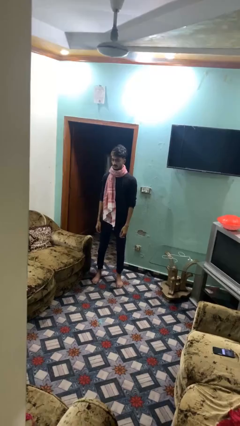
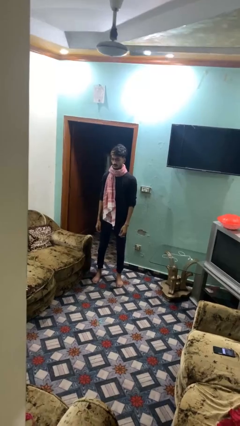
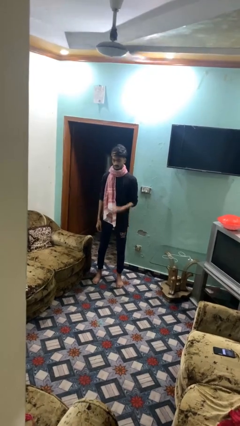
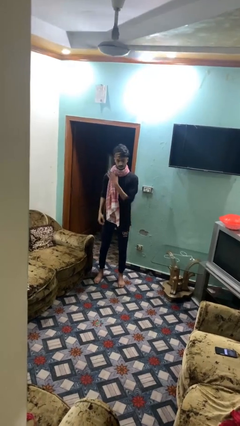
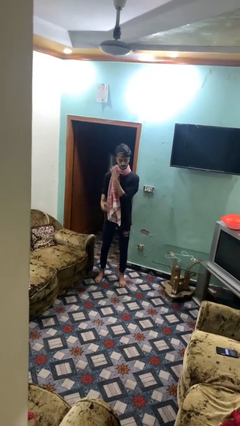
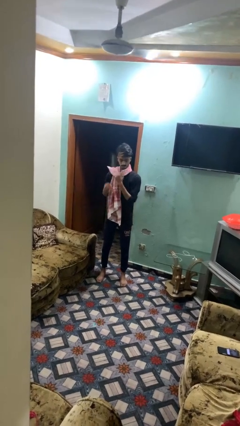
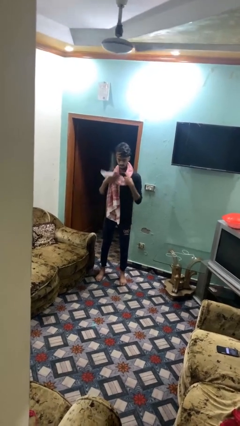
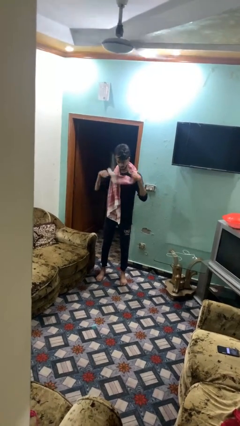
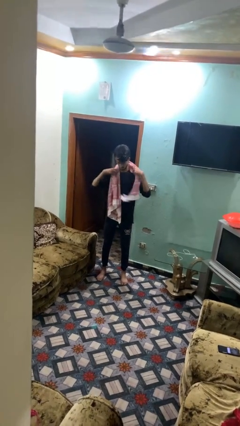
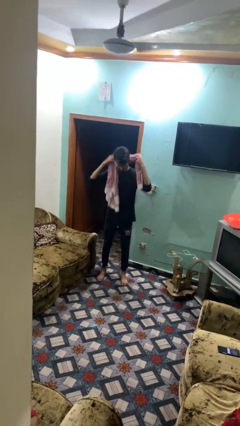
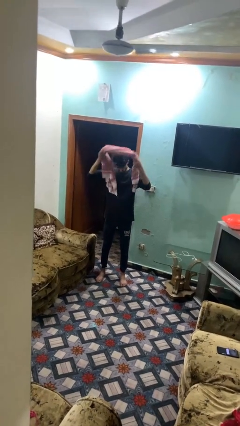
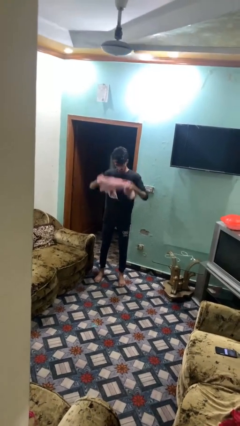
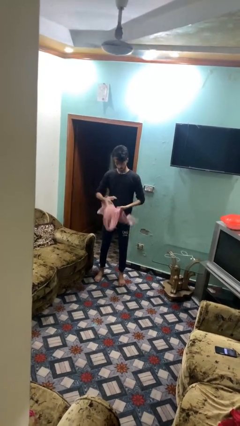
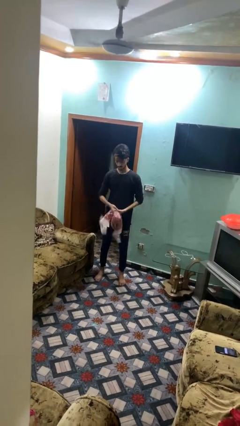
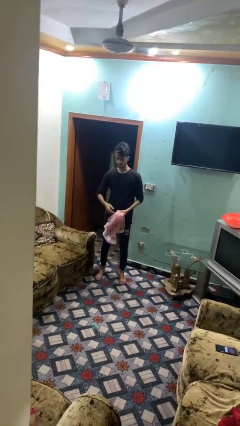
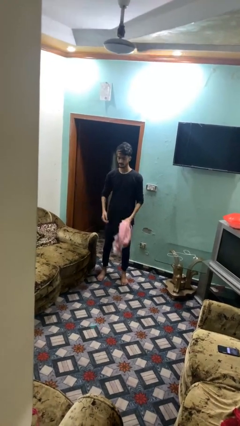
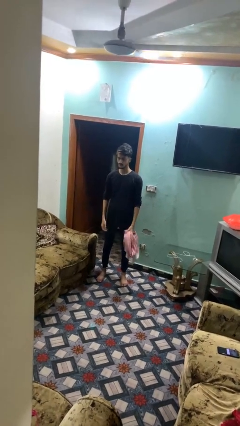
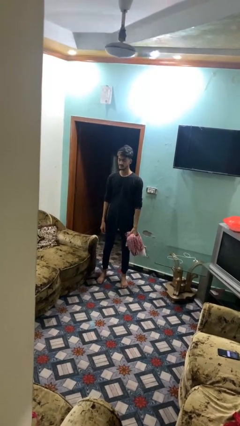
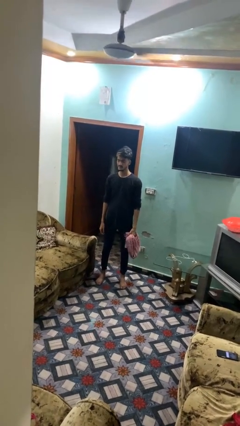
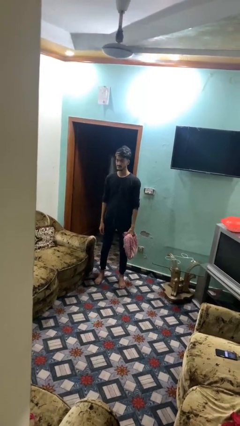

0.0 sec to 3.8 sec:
person takes off scarf

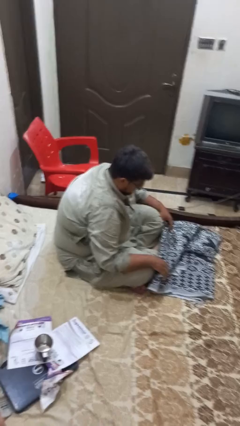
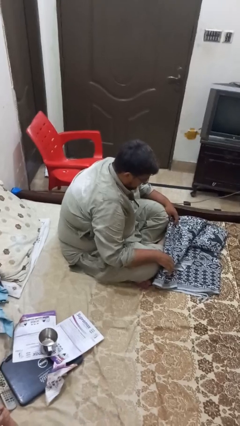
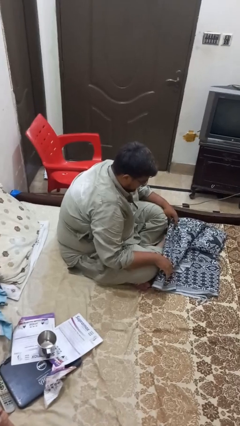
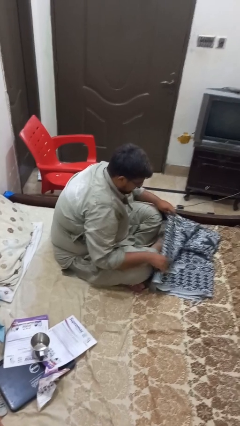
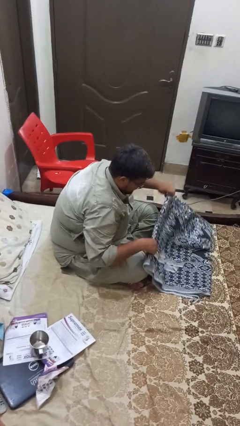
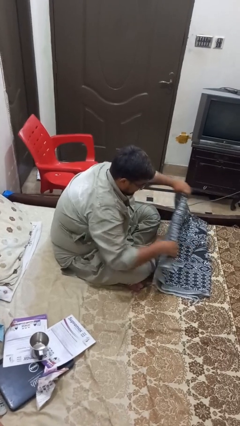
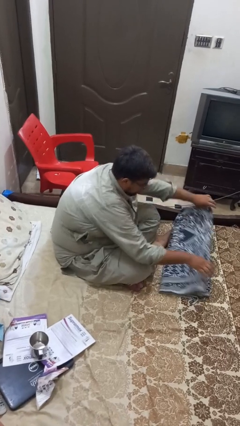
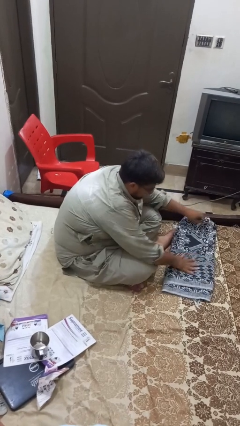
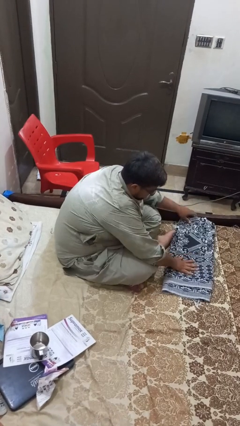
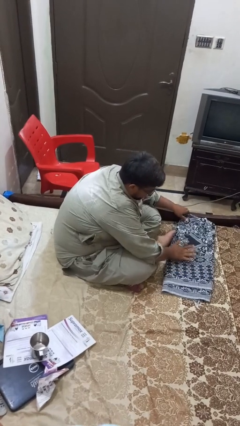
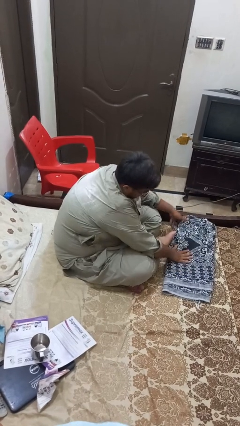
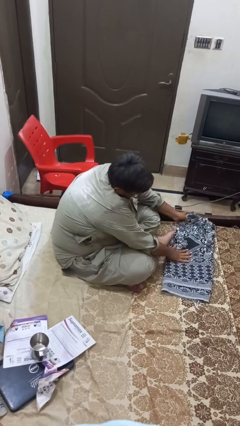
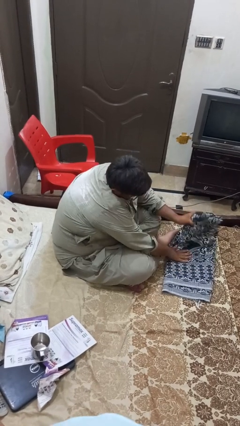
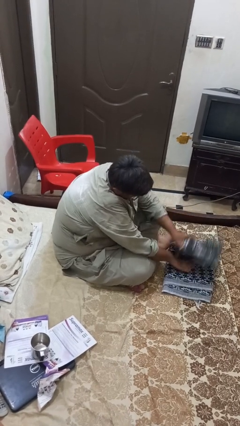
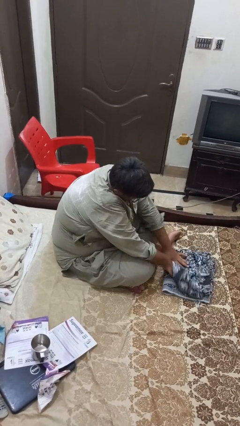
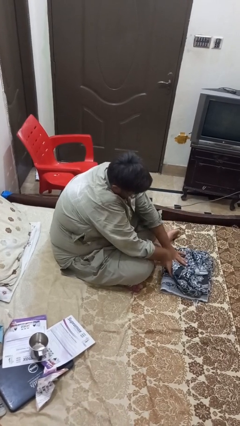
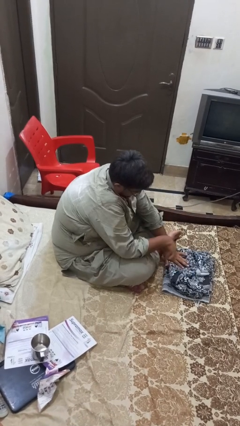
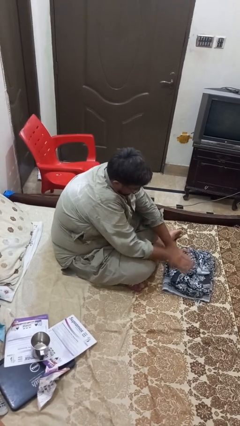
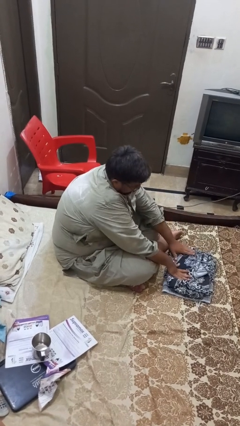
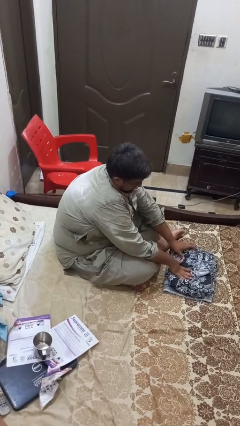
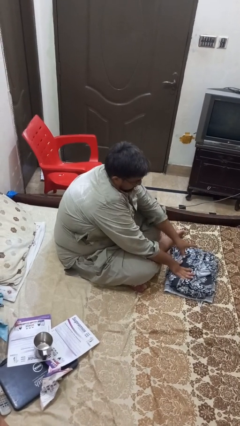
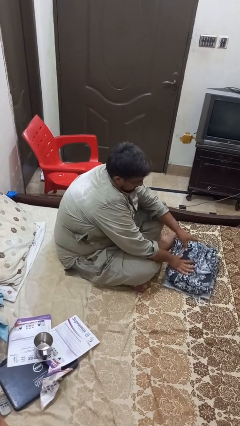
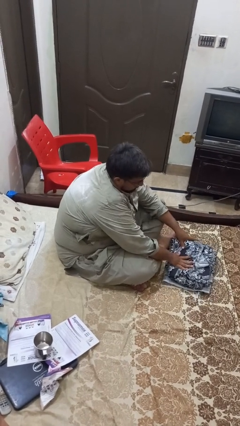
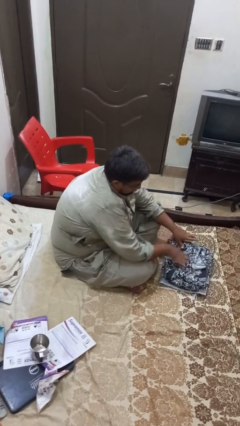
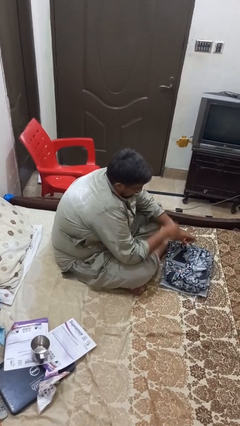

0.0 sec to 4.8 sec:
person folds blanket

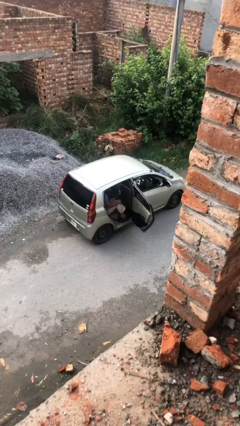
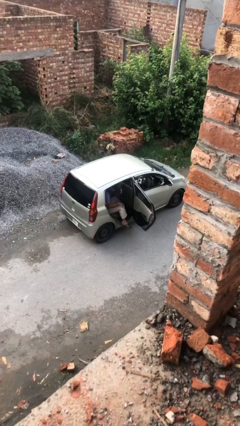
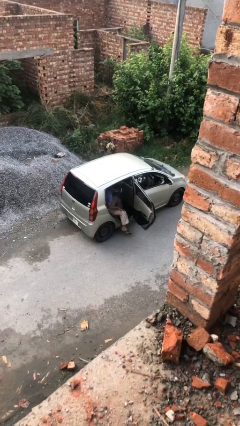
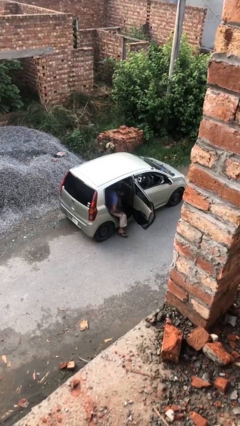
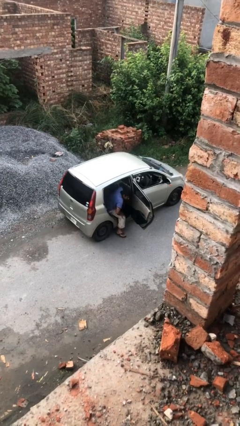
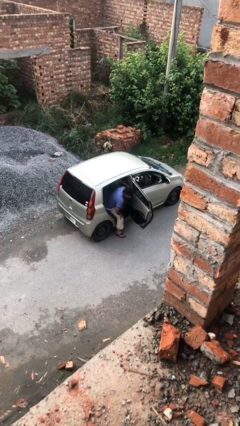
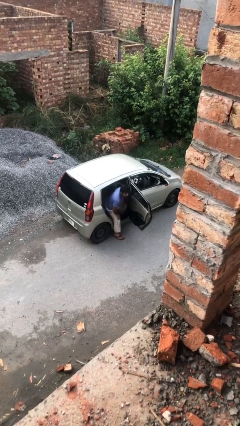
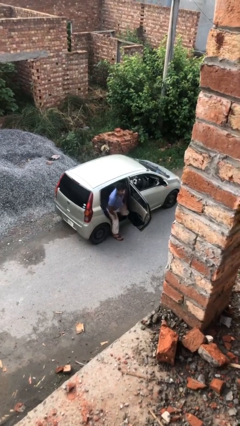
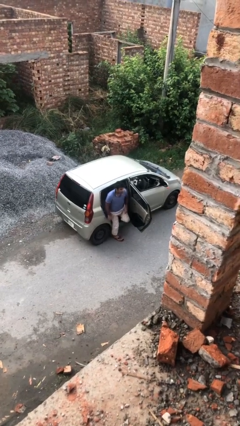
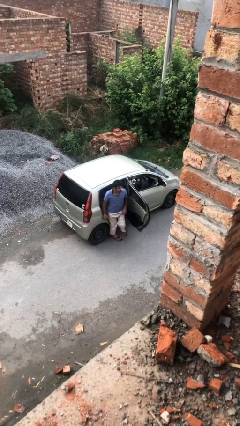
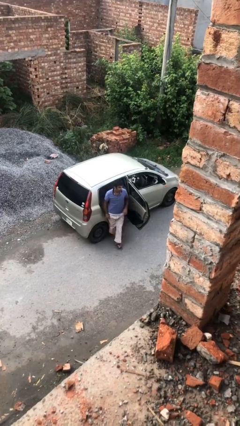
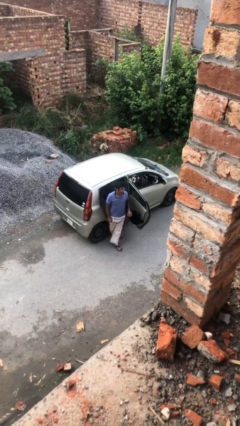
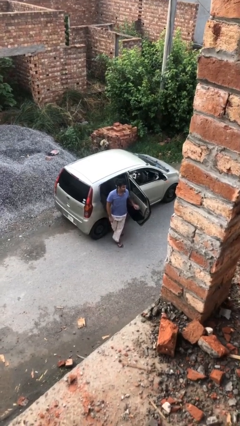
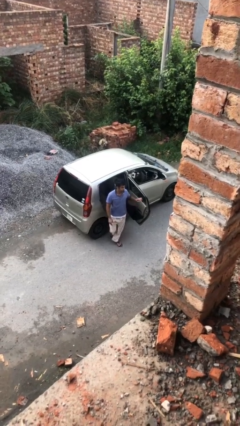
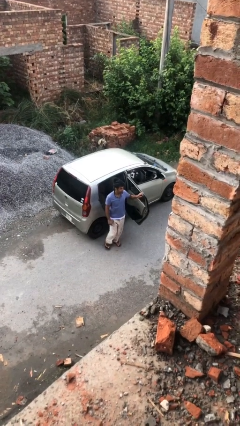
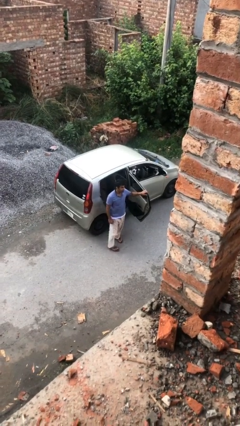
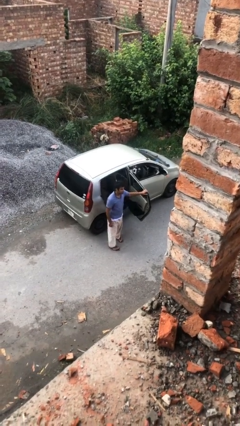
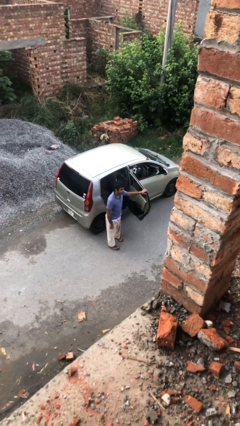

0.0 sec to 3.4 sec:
person exits car

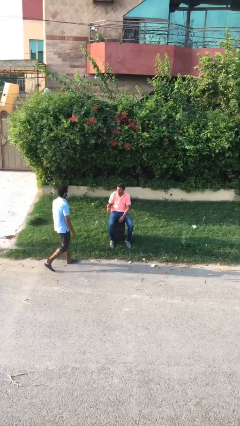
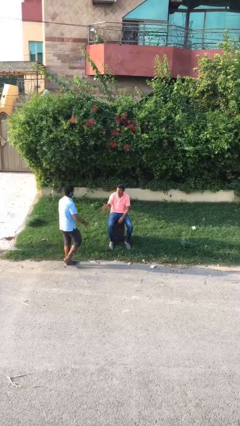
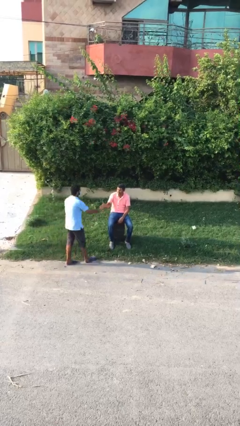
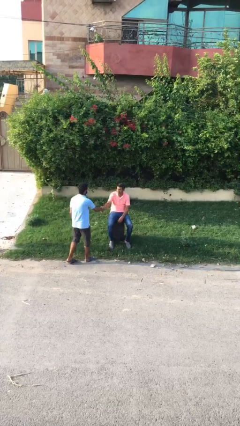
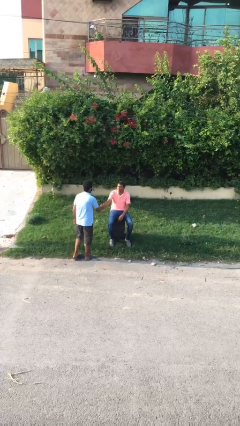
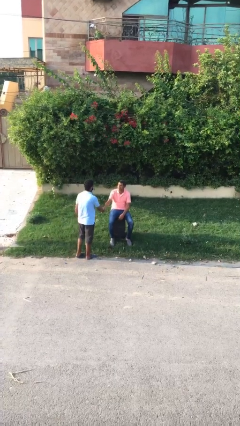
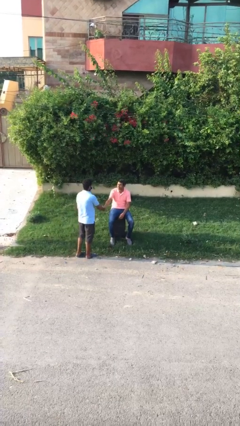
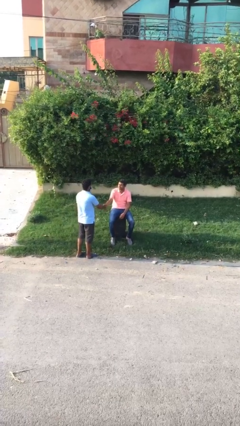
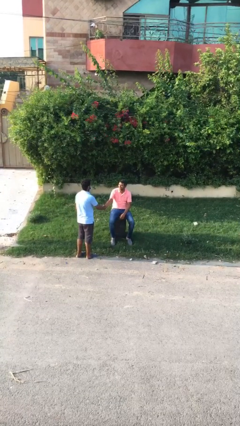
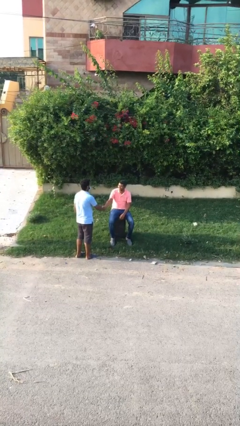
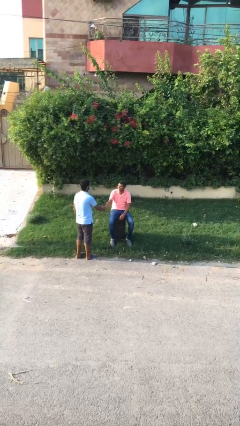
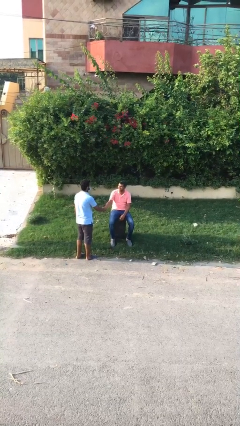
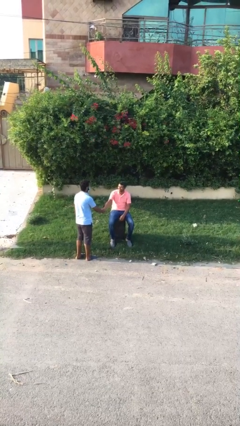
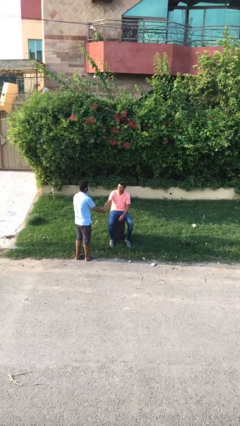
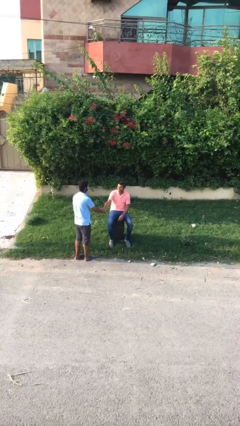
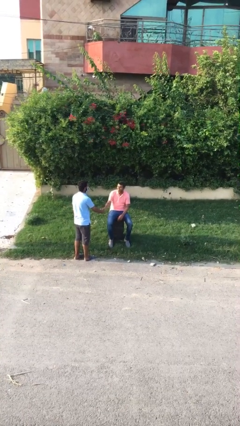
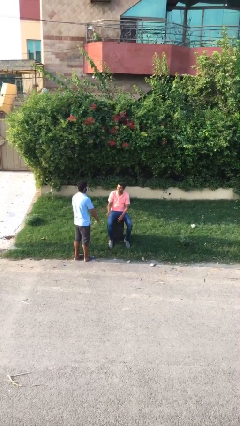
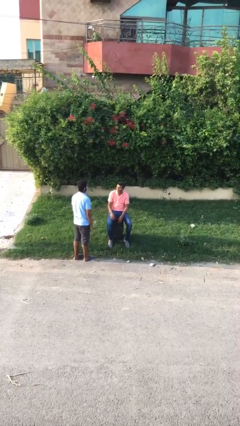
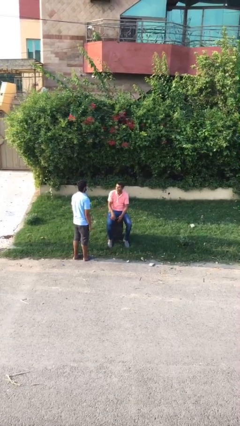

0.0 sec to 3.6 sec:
person shakes hand

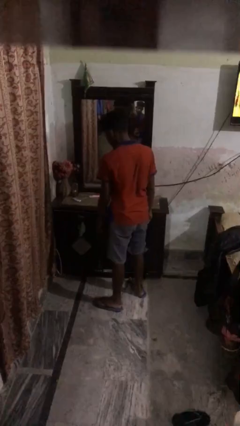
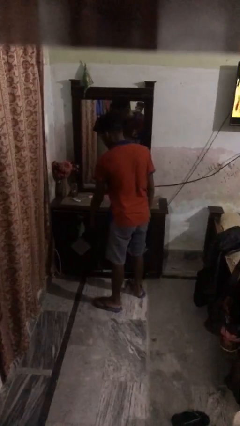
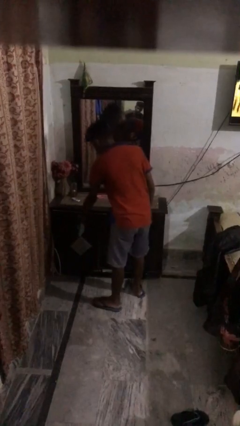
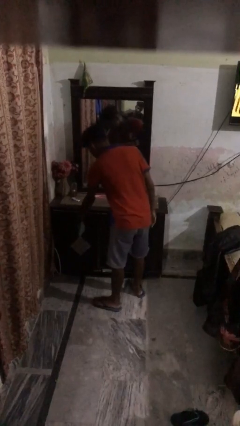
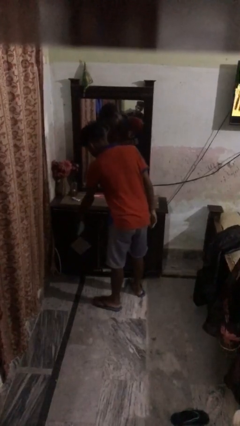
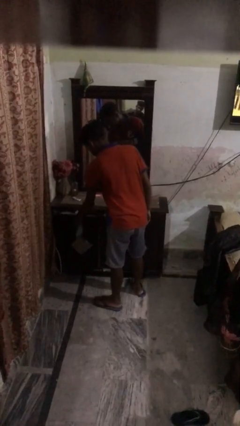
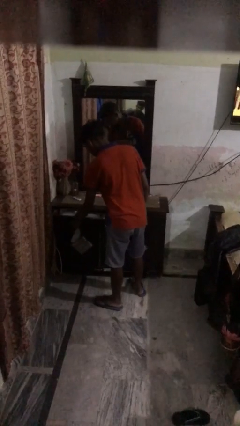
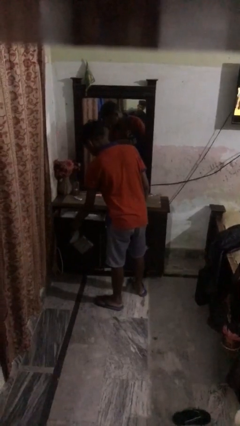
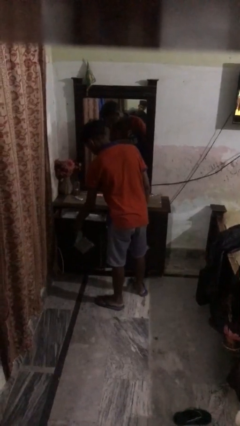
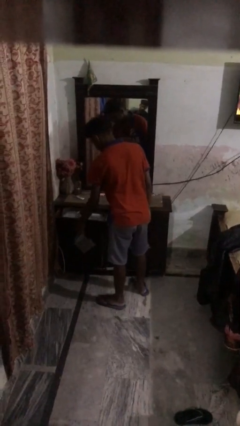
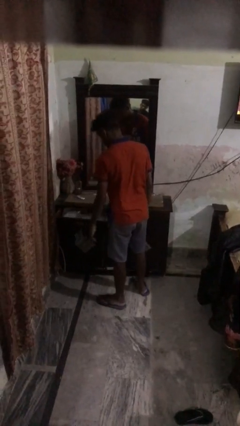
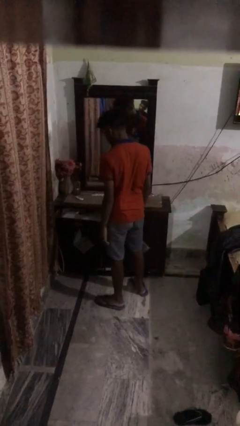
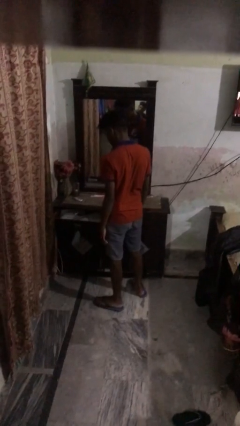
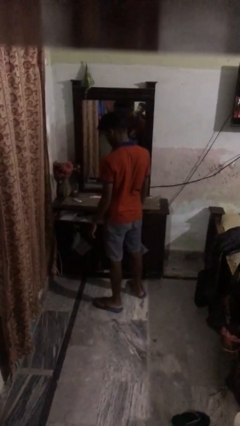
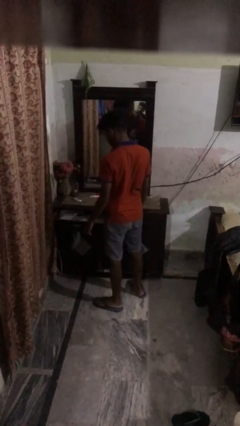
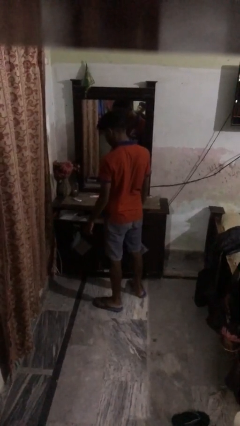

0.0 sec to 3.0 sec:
person opens dresser drawer
